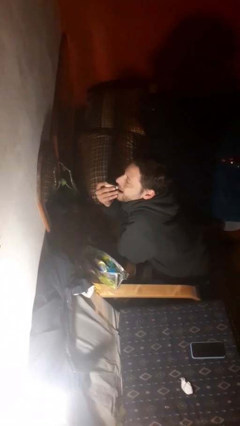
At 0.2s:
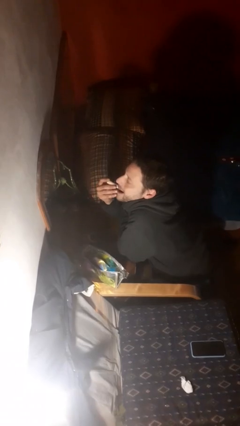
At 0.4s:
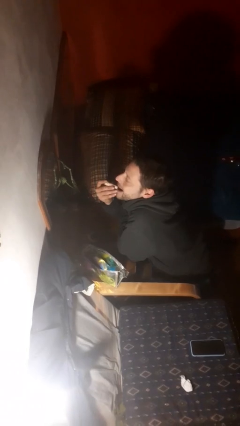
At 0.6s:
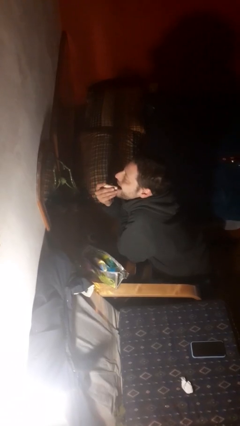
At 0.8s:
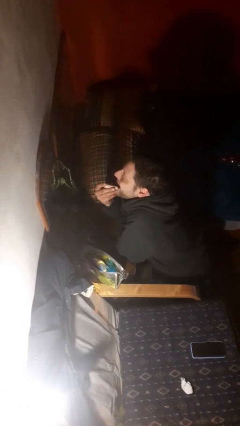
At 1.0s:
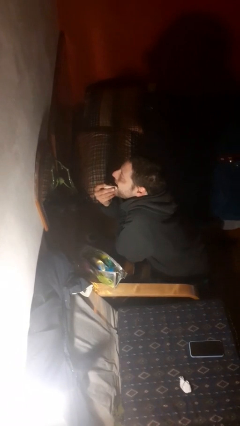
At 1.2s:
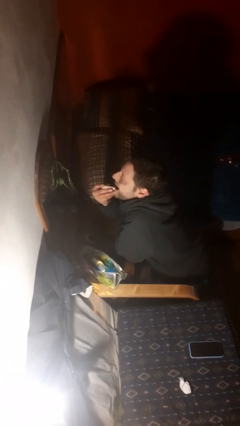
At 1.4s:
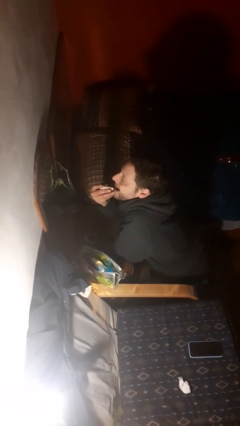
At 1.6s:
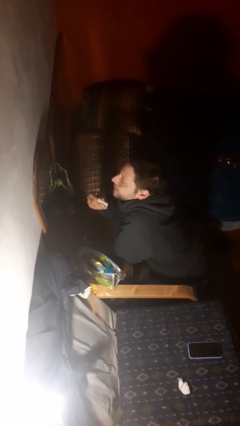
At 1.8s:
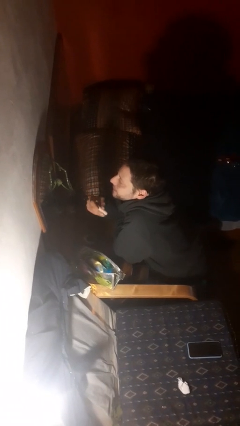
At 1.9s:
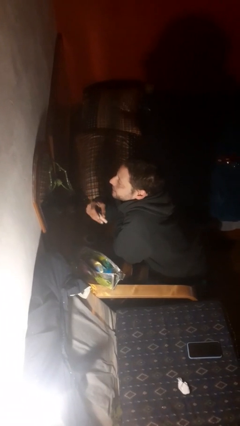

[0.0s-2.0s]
person applies lip makeup

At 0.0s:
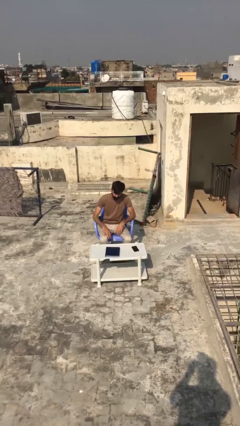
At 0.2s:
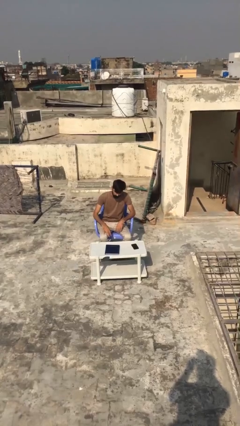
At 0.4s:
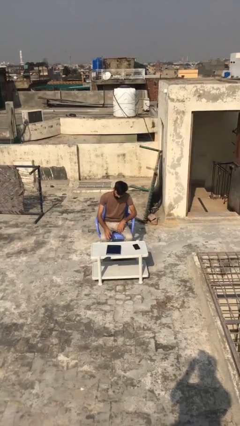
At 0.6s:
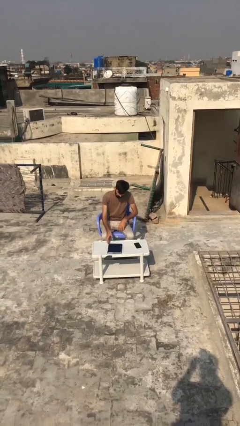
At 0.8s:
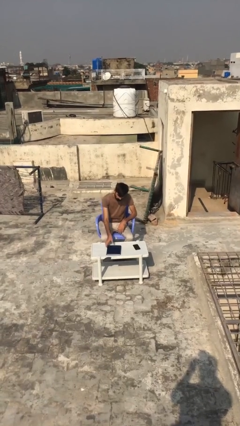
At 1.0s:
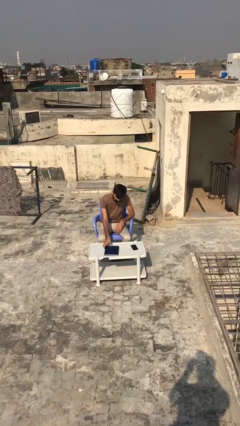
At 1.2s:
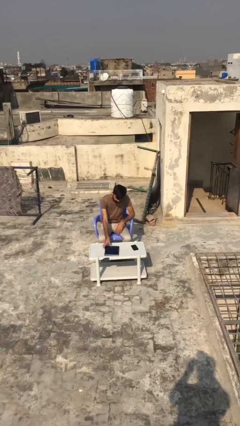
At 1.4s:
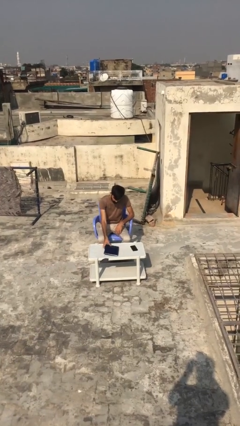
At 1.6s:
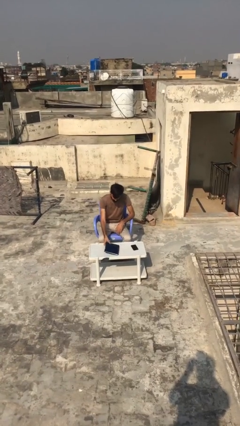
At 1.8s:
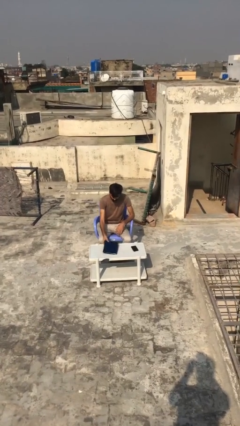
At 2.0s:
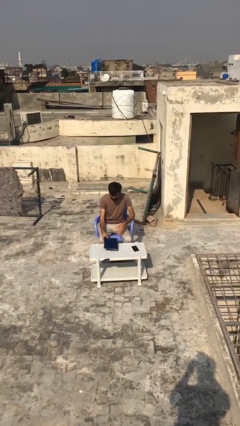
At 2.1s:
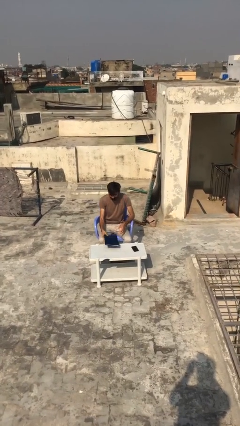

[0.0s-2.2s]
person picks up object from table

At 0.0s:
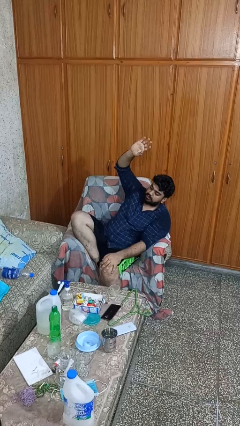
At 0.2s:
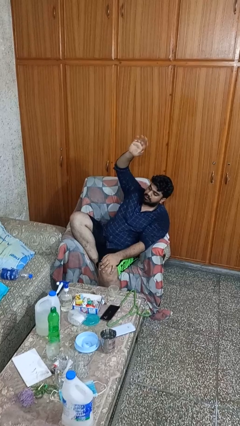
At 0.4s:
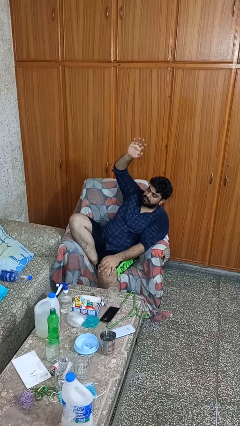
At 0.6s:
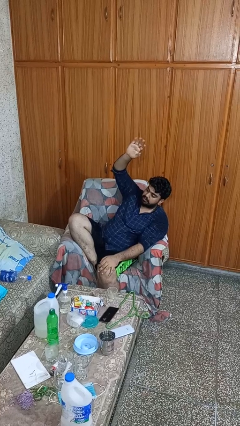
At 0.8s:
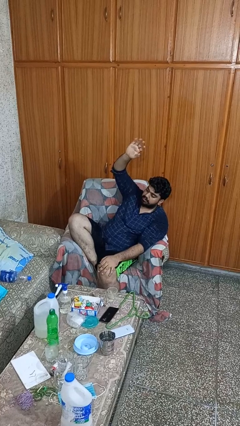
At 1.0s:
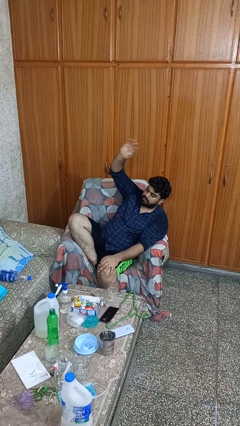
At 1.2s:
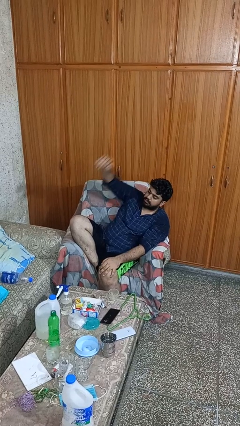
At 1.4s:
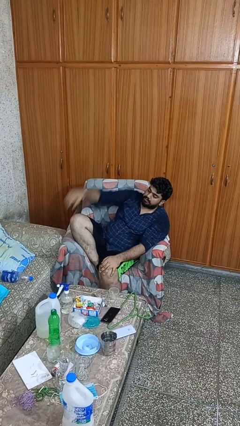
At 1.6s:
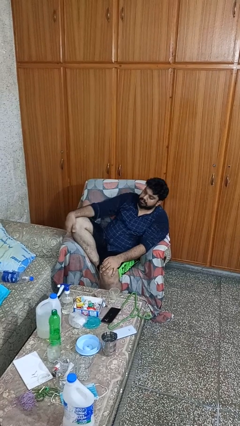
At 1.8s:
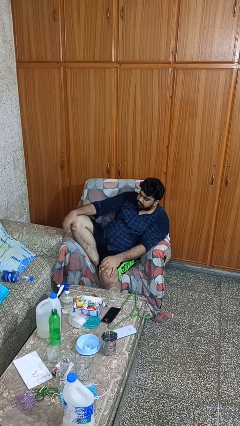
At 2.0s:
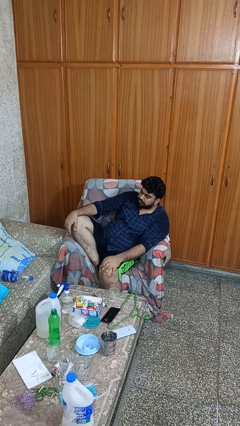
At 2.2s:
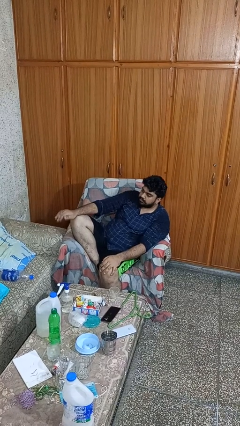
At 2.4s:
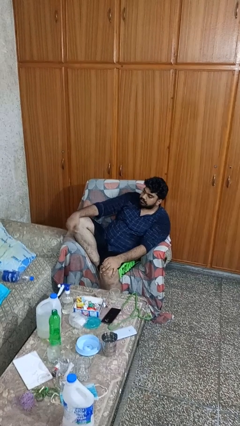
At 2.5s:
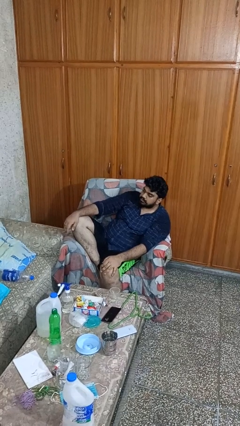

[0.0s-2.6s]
person waves at person

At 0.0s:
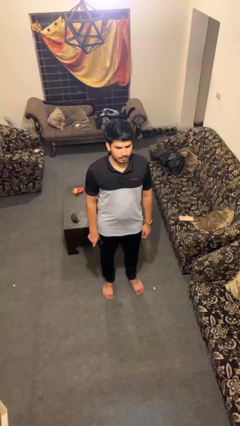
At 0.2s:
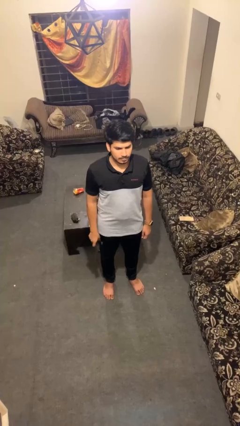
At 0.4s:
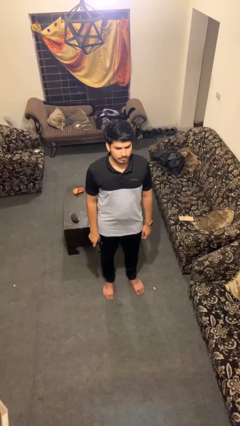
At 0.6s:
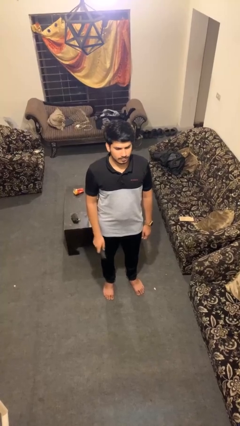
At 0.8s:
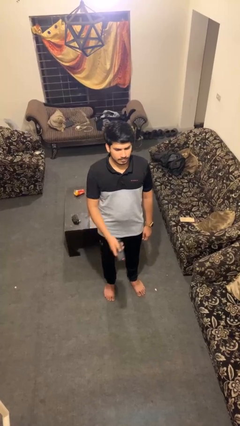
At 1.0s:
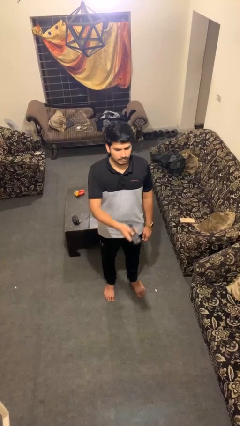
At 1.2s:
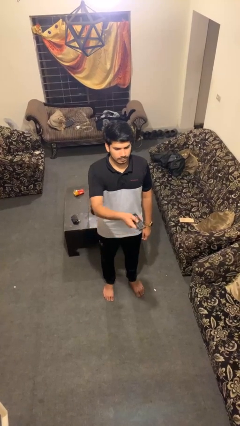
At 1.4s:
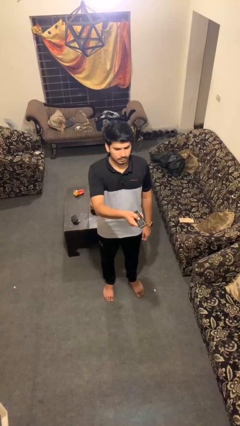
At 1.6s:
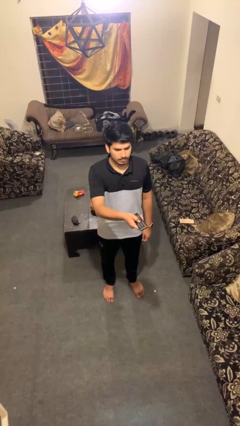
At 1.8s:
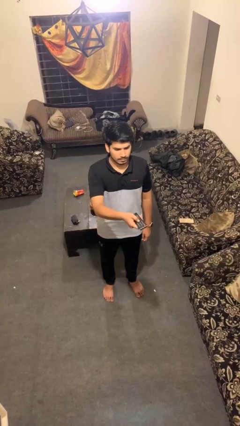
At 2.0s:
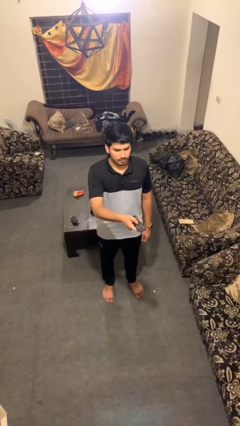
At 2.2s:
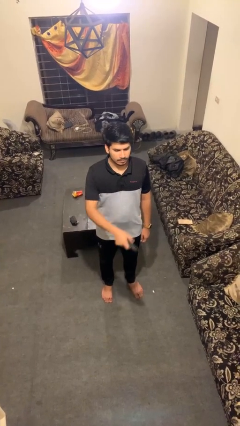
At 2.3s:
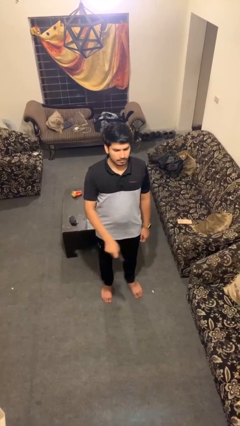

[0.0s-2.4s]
person uses television remote

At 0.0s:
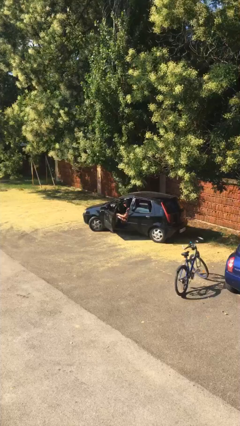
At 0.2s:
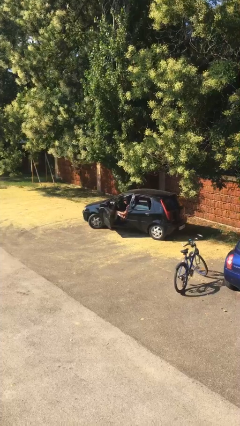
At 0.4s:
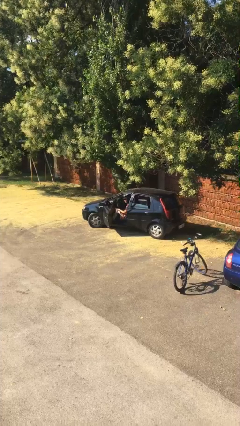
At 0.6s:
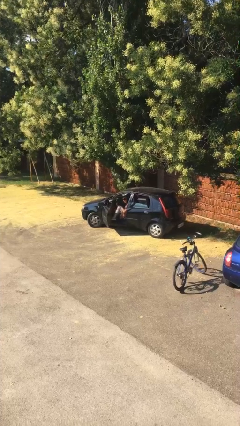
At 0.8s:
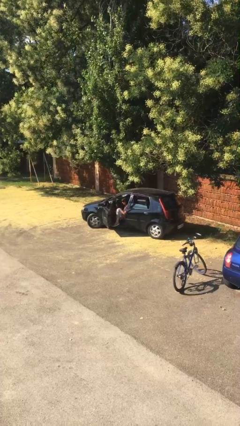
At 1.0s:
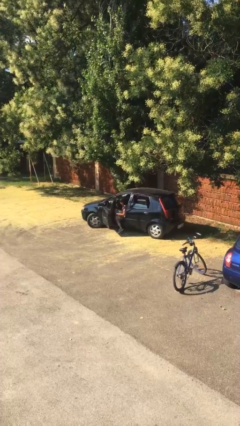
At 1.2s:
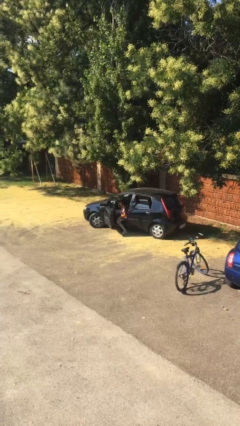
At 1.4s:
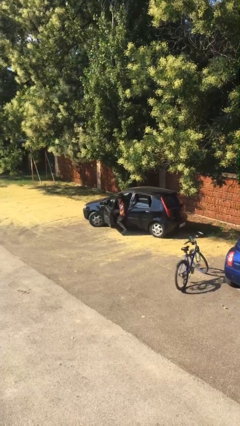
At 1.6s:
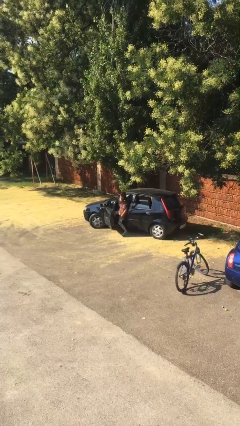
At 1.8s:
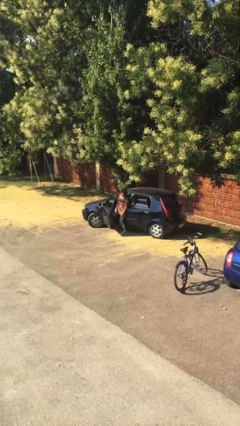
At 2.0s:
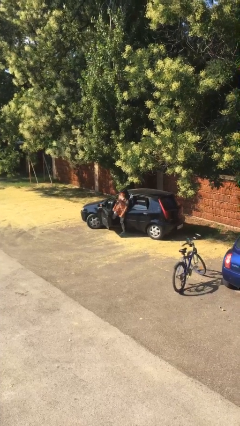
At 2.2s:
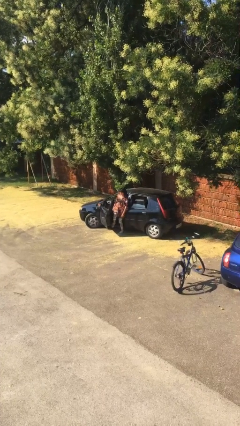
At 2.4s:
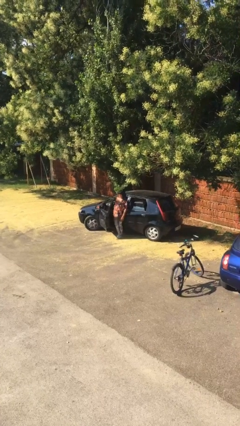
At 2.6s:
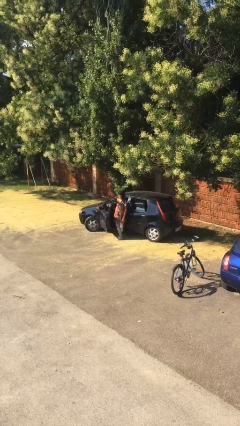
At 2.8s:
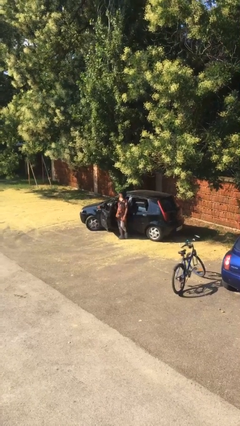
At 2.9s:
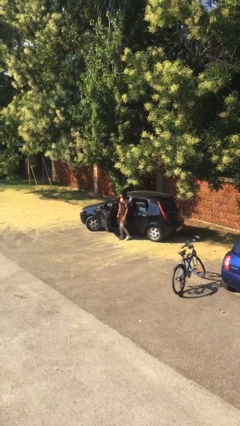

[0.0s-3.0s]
person exits car

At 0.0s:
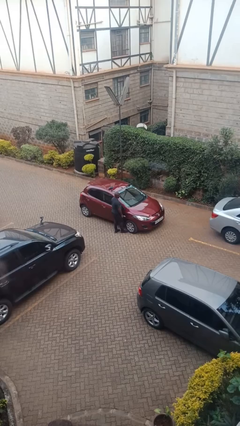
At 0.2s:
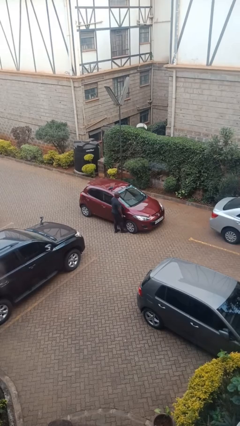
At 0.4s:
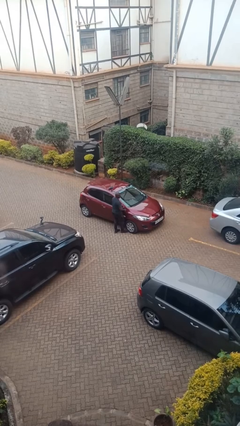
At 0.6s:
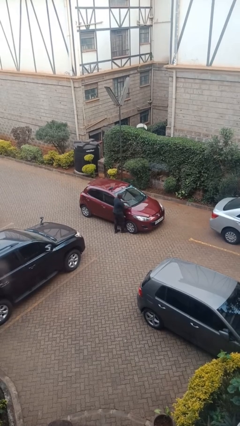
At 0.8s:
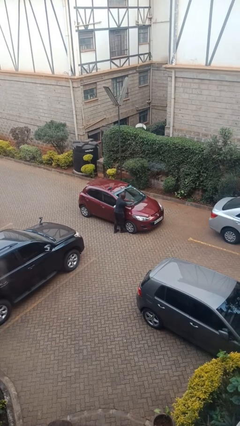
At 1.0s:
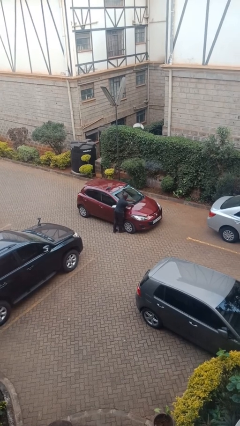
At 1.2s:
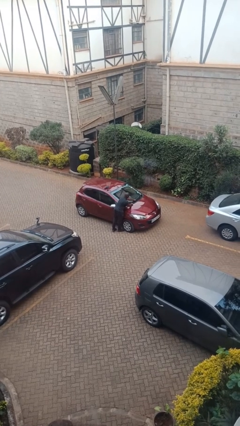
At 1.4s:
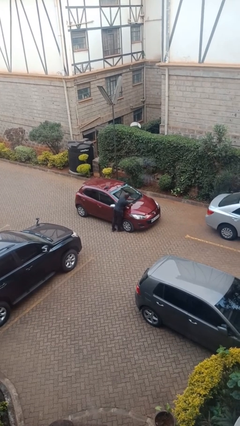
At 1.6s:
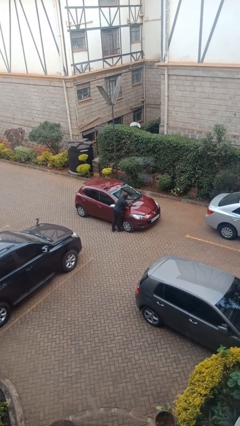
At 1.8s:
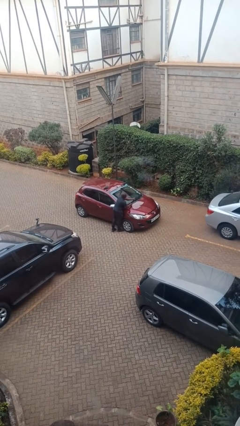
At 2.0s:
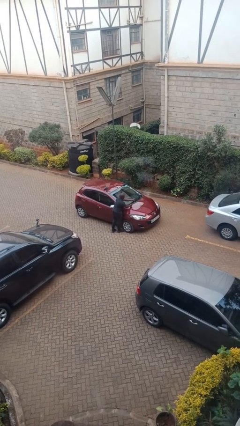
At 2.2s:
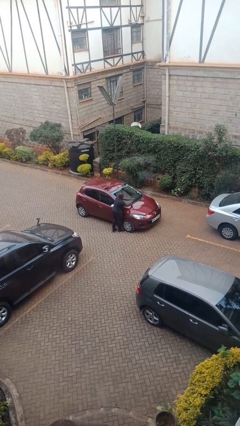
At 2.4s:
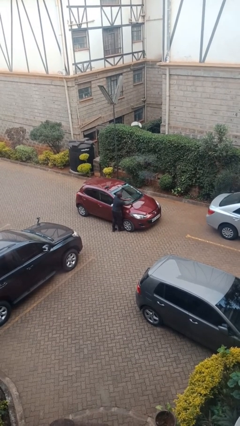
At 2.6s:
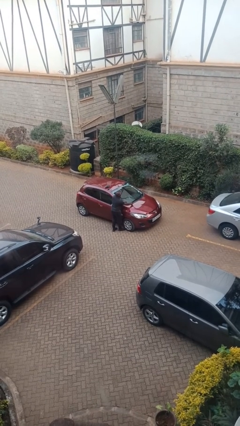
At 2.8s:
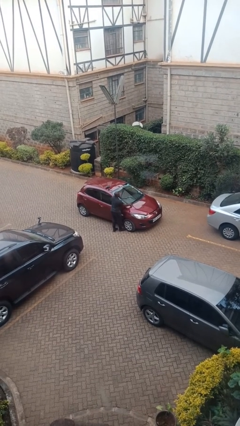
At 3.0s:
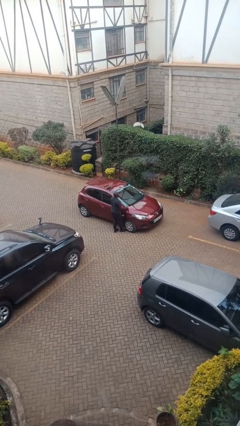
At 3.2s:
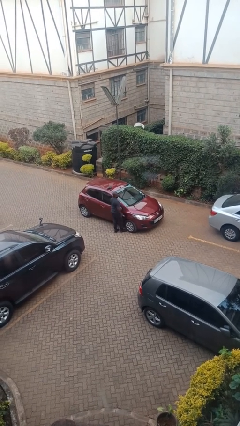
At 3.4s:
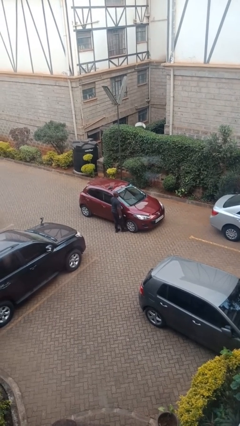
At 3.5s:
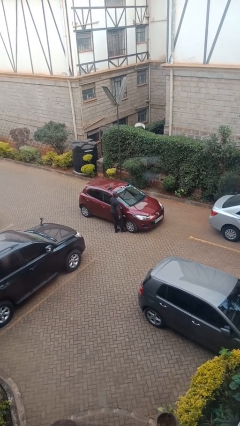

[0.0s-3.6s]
person flips up car wipers

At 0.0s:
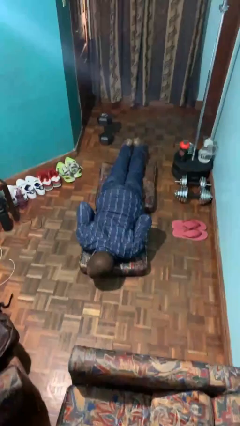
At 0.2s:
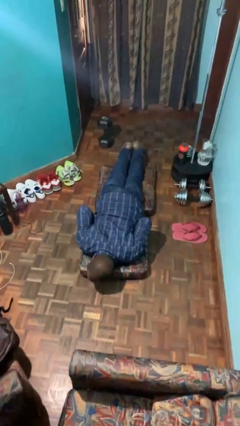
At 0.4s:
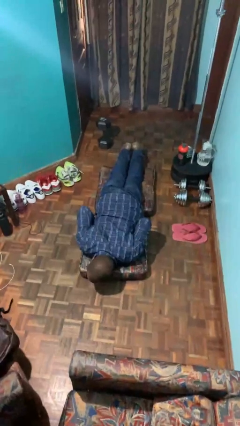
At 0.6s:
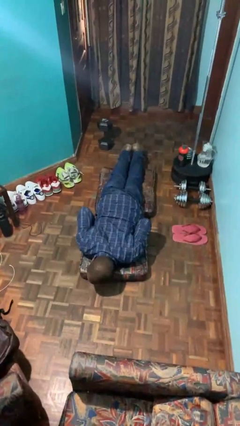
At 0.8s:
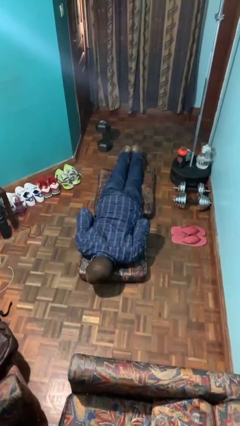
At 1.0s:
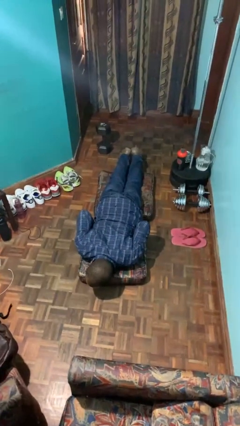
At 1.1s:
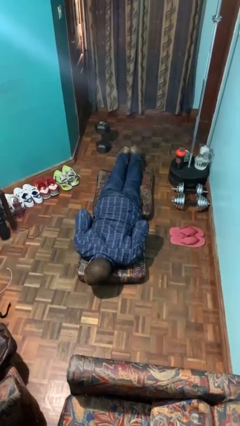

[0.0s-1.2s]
person lies down on floor
